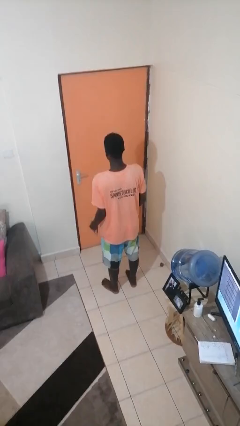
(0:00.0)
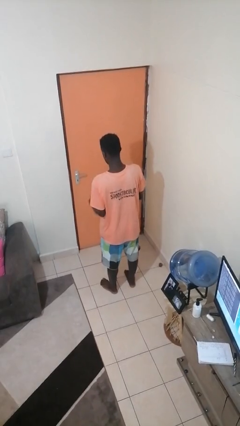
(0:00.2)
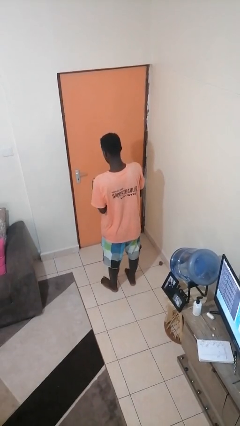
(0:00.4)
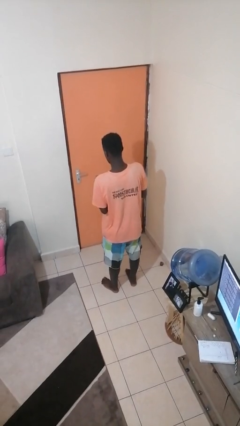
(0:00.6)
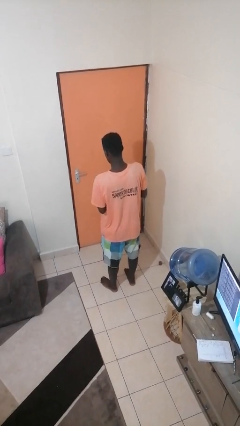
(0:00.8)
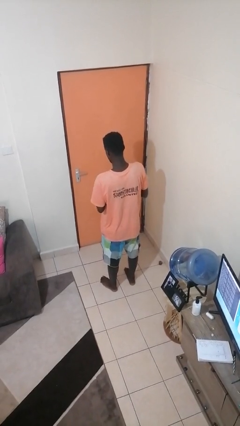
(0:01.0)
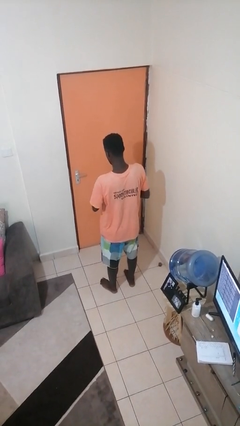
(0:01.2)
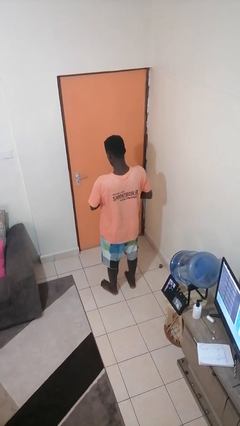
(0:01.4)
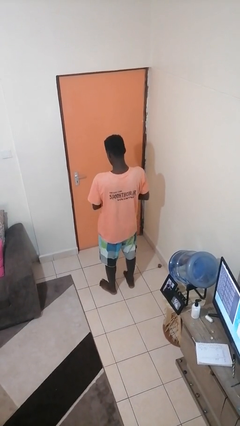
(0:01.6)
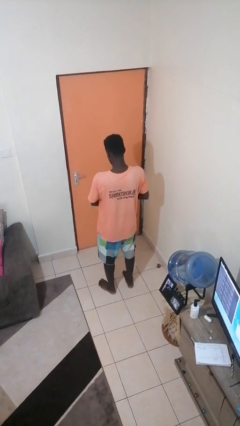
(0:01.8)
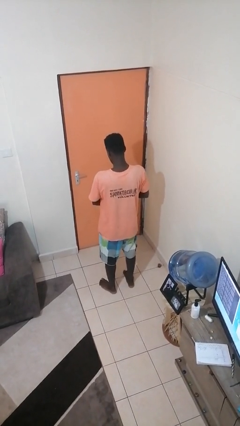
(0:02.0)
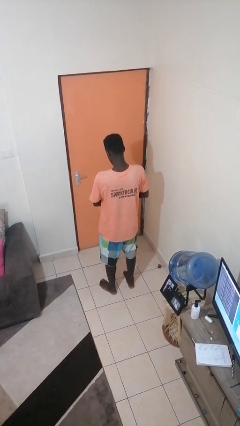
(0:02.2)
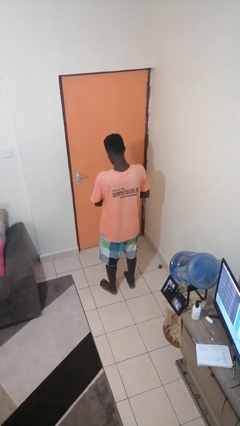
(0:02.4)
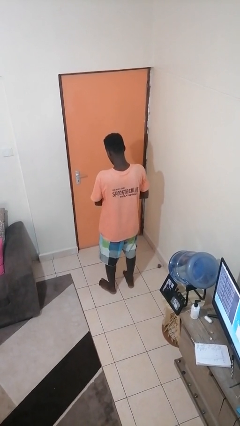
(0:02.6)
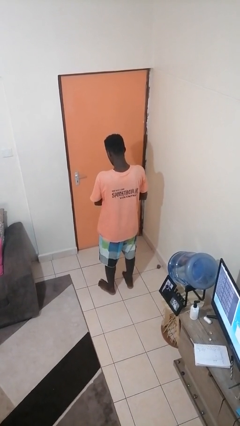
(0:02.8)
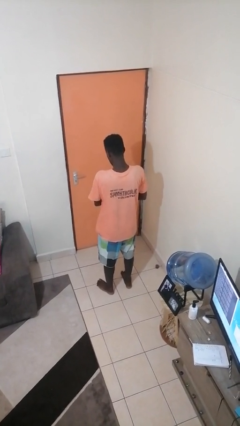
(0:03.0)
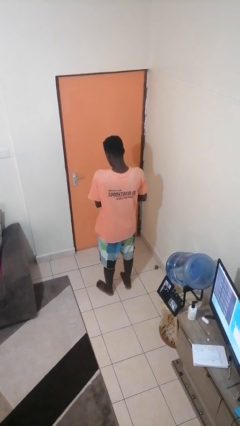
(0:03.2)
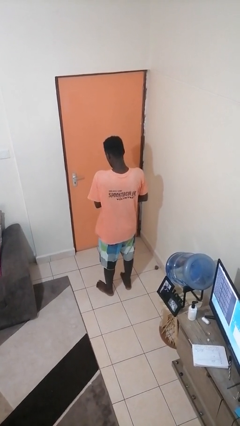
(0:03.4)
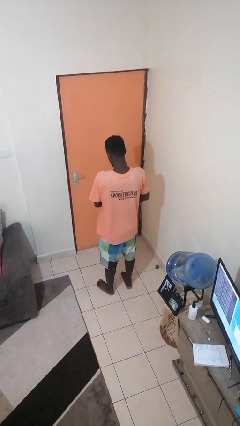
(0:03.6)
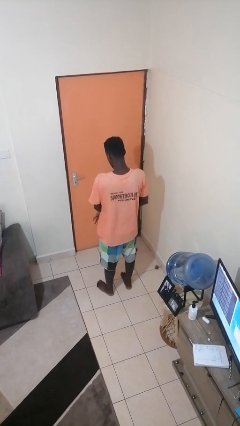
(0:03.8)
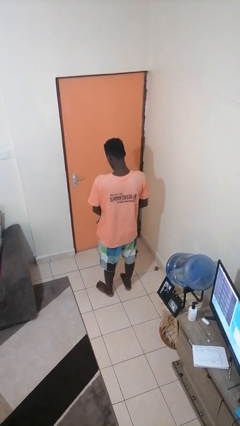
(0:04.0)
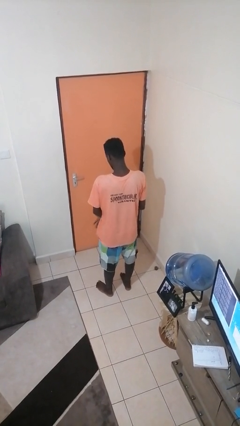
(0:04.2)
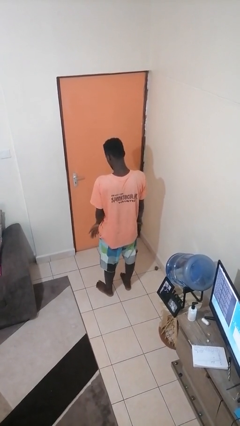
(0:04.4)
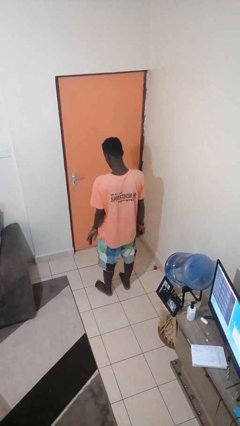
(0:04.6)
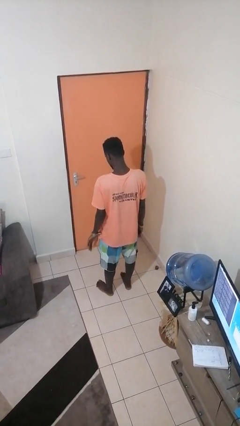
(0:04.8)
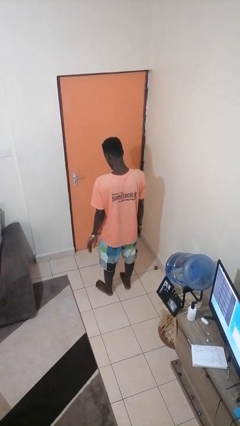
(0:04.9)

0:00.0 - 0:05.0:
person puts on wristwatch

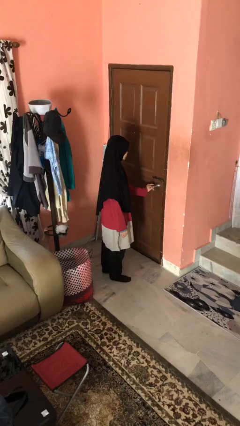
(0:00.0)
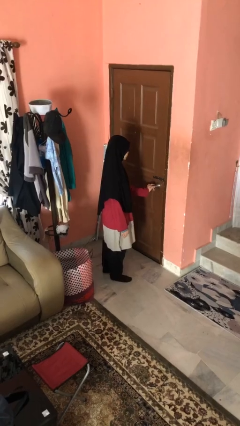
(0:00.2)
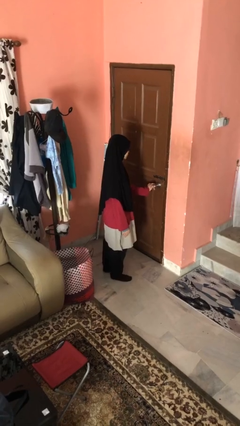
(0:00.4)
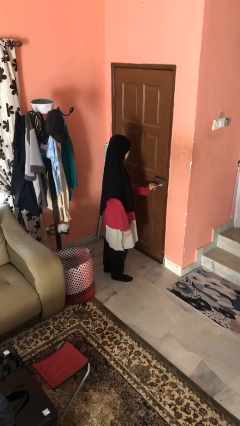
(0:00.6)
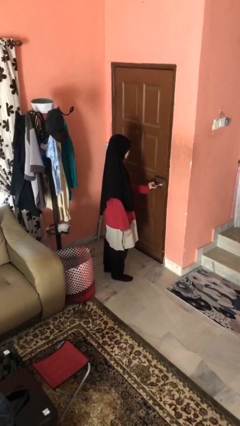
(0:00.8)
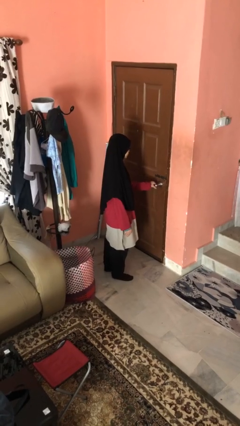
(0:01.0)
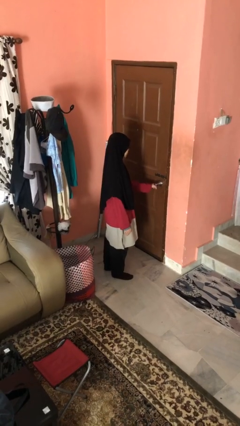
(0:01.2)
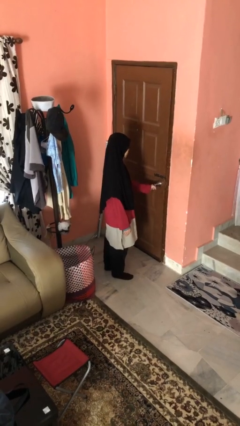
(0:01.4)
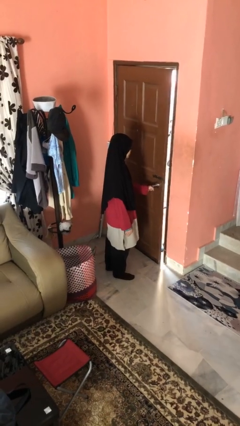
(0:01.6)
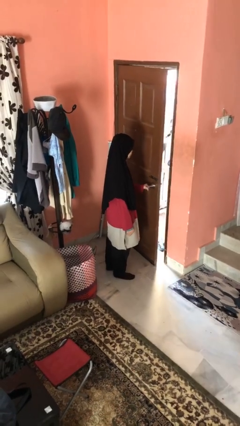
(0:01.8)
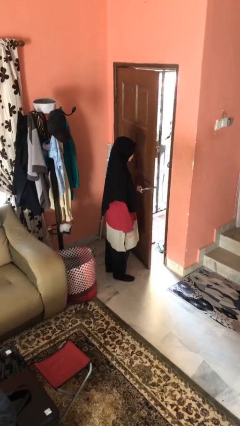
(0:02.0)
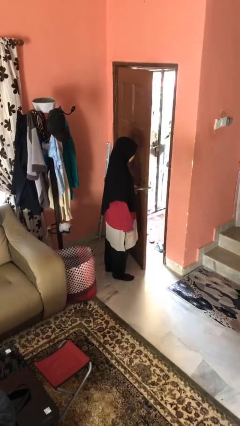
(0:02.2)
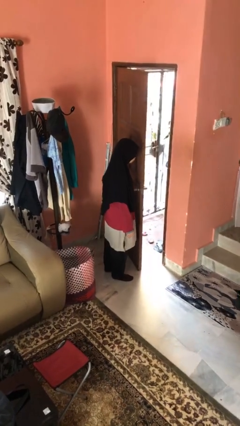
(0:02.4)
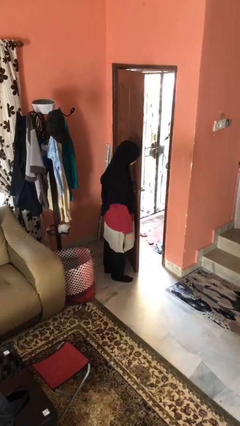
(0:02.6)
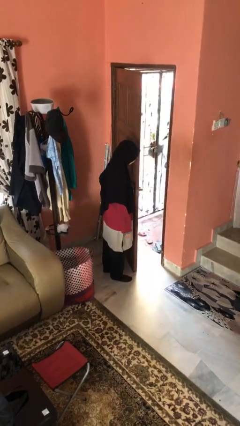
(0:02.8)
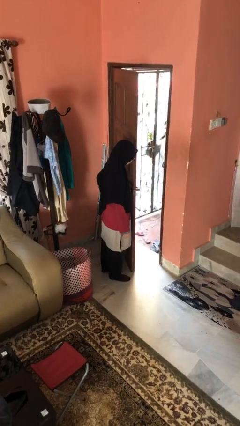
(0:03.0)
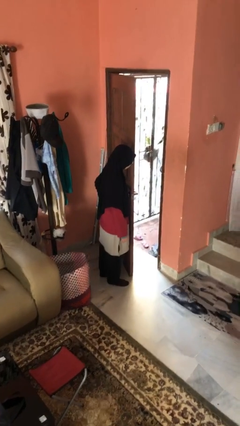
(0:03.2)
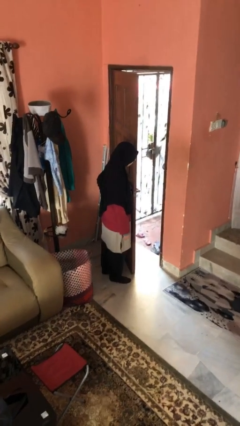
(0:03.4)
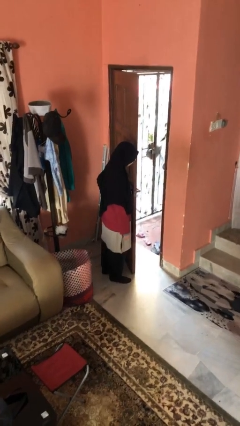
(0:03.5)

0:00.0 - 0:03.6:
person opens facility door

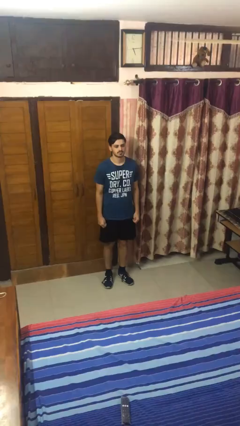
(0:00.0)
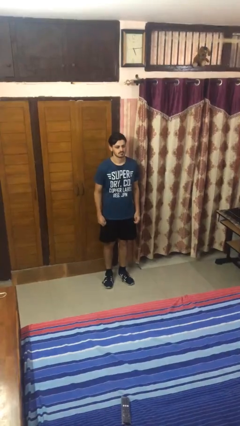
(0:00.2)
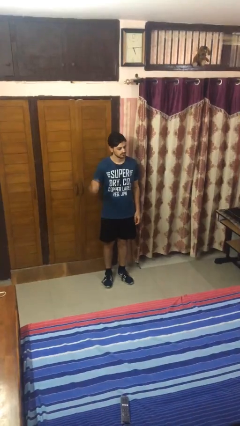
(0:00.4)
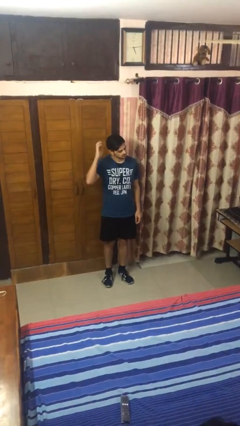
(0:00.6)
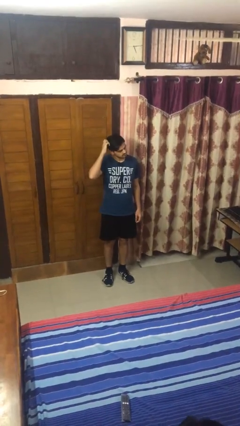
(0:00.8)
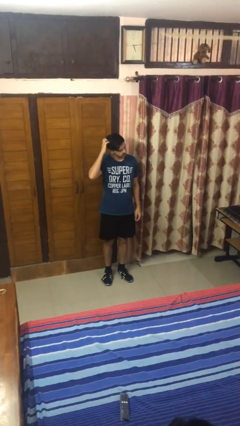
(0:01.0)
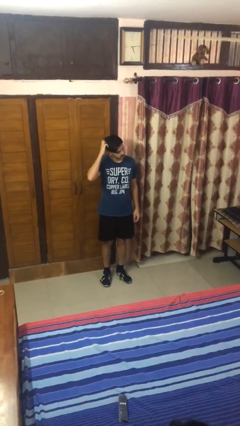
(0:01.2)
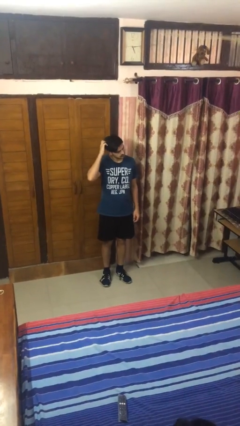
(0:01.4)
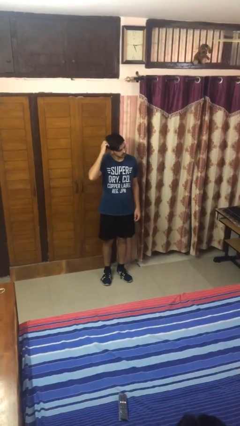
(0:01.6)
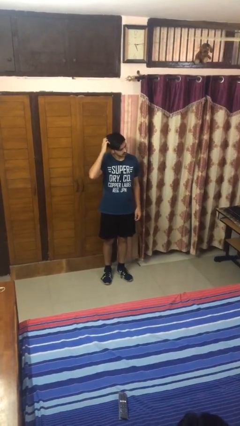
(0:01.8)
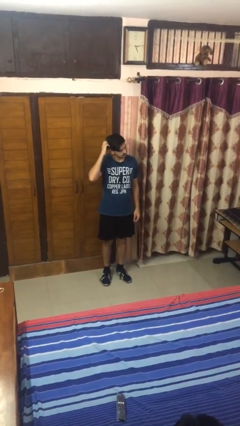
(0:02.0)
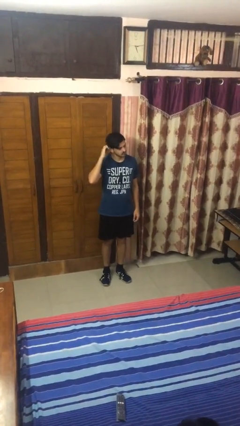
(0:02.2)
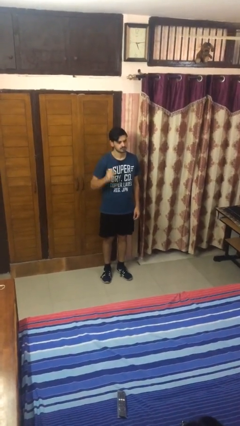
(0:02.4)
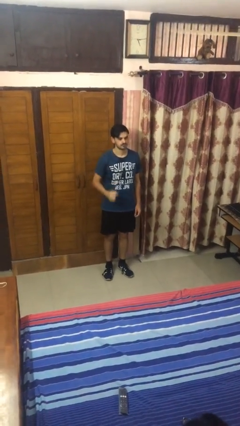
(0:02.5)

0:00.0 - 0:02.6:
person scratches face

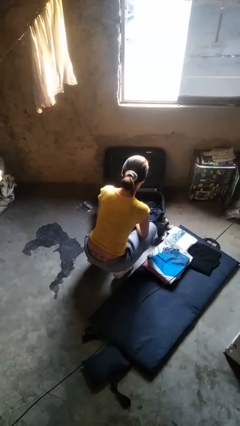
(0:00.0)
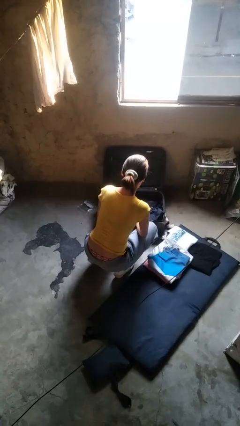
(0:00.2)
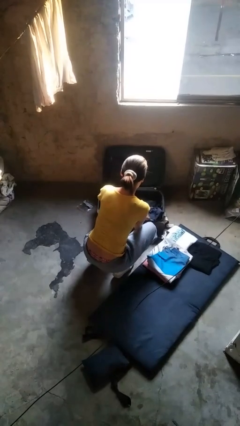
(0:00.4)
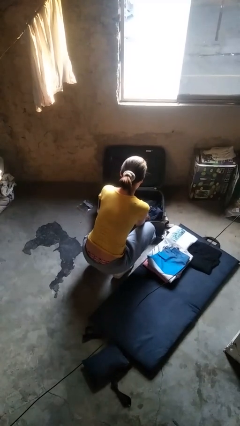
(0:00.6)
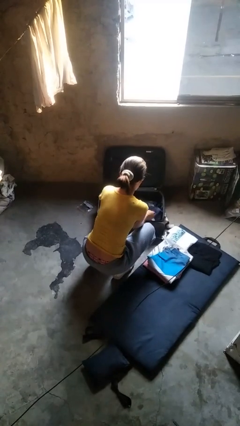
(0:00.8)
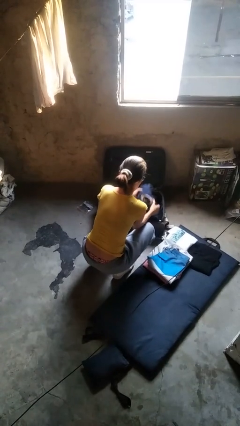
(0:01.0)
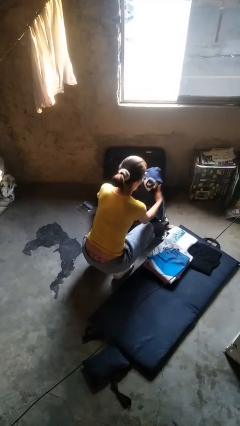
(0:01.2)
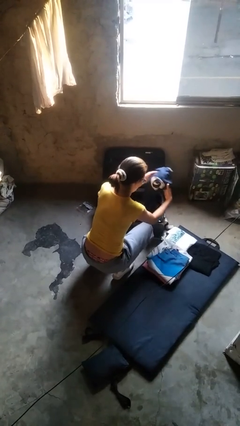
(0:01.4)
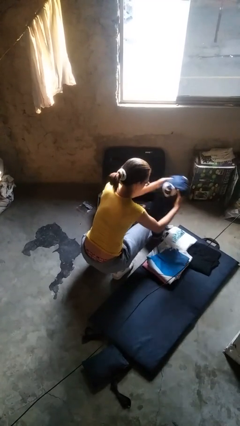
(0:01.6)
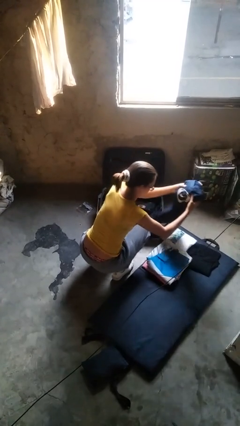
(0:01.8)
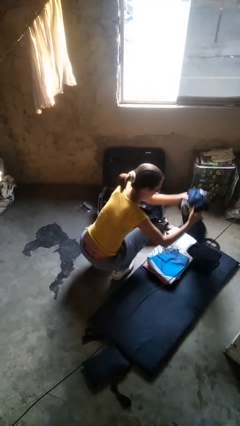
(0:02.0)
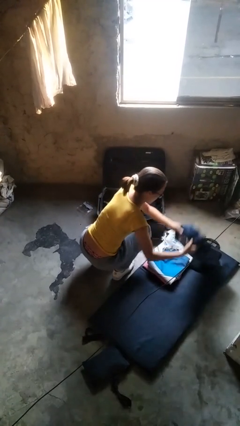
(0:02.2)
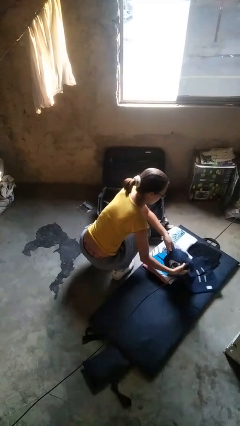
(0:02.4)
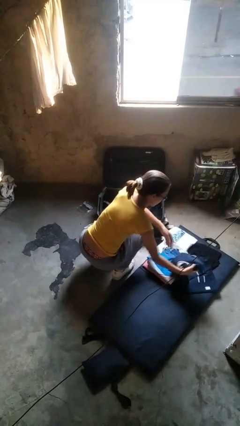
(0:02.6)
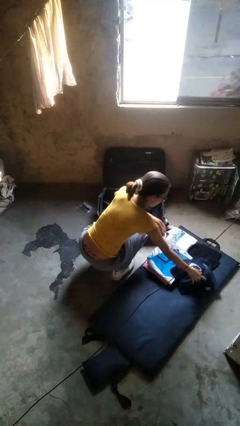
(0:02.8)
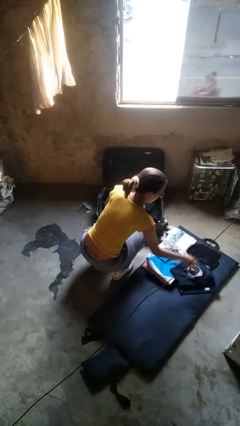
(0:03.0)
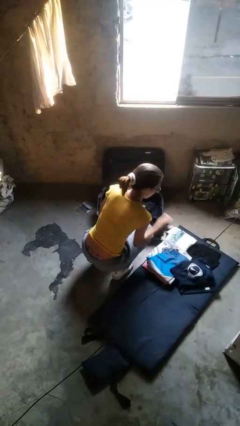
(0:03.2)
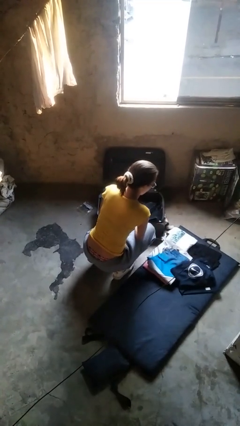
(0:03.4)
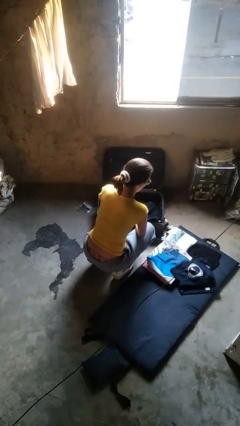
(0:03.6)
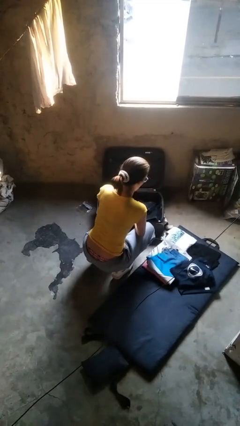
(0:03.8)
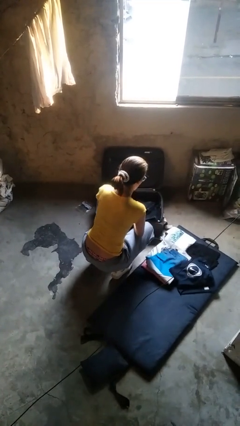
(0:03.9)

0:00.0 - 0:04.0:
person unloads clothes from suitcase

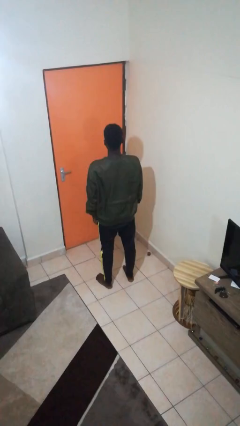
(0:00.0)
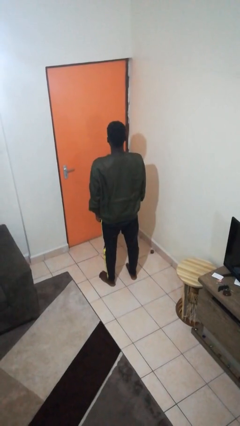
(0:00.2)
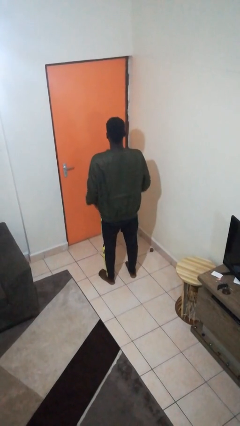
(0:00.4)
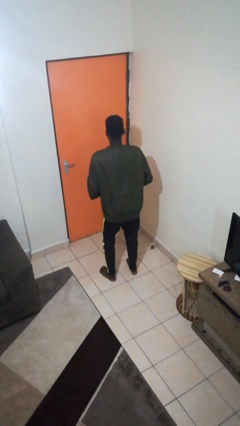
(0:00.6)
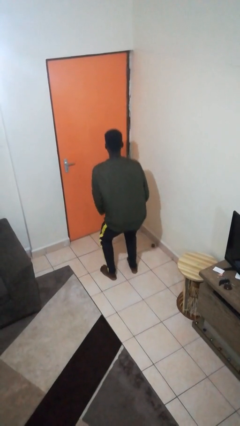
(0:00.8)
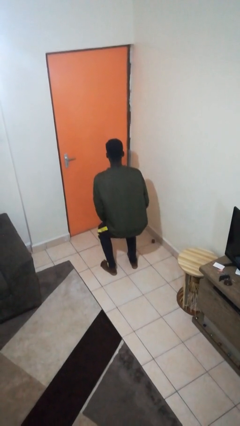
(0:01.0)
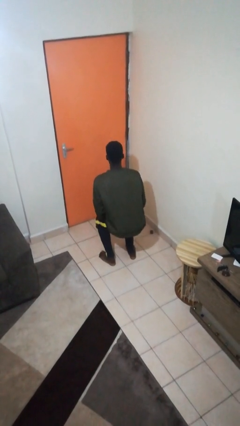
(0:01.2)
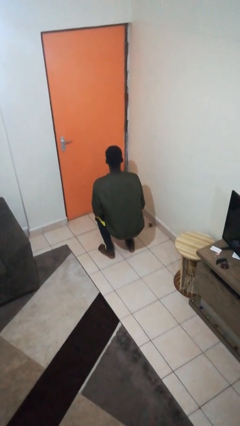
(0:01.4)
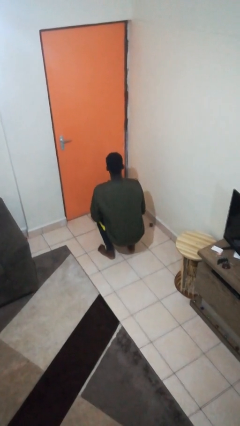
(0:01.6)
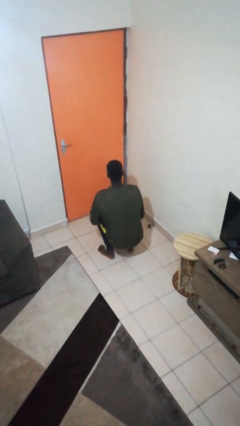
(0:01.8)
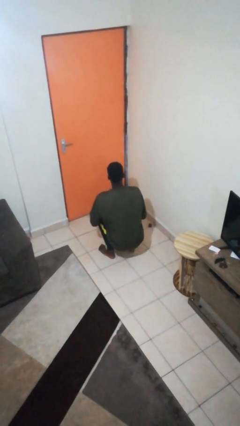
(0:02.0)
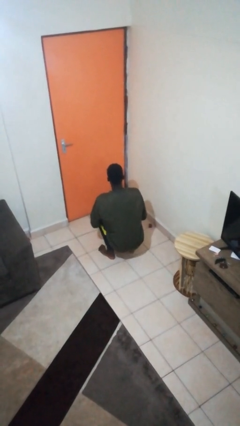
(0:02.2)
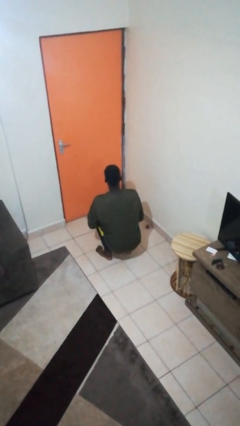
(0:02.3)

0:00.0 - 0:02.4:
person squats
